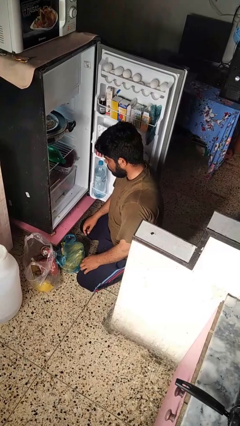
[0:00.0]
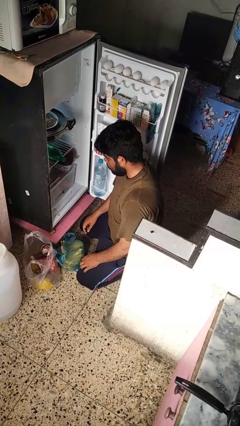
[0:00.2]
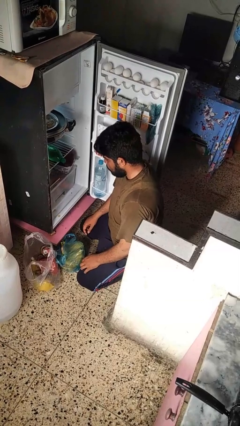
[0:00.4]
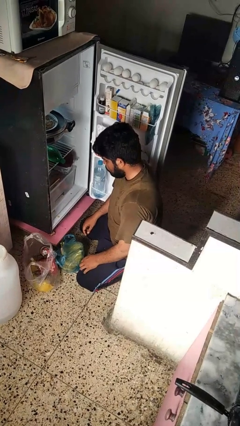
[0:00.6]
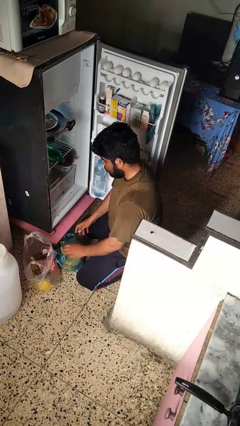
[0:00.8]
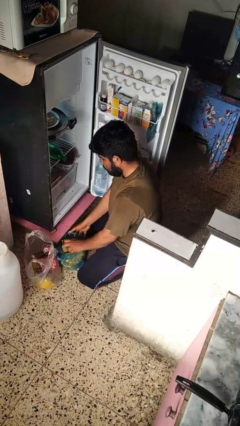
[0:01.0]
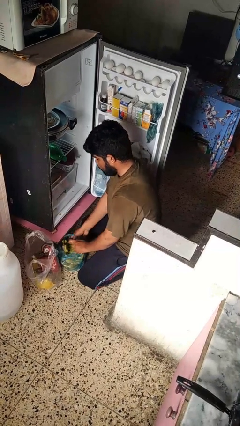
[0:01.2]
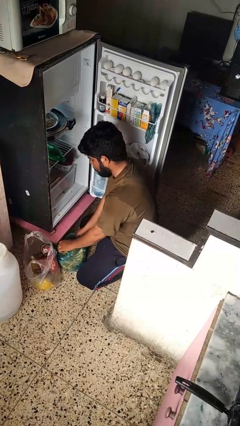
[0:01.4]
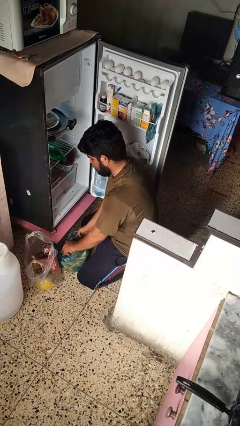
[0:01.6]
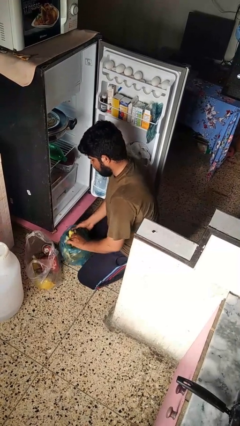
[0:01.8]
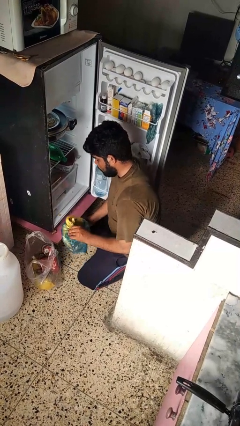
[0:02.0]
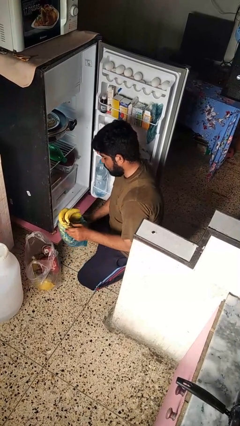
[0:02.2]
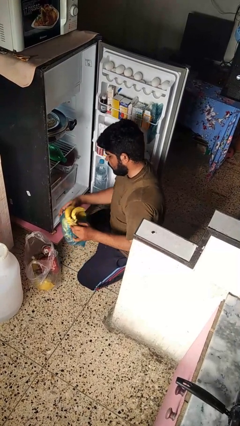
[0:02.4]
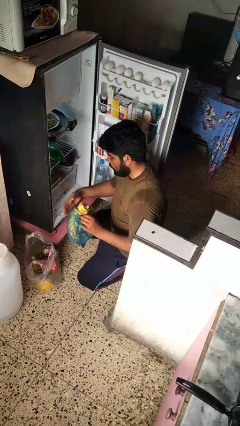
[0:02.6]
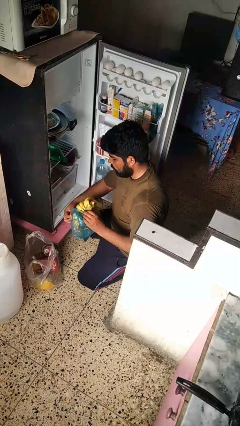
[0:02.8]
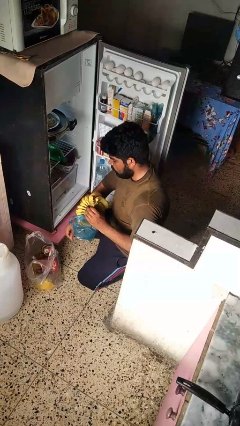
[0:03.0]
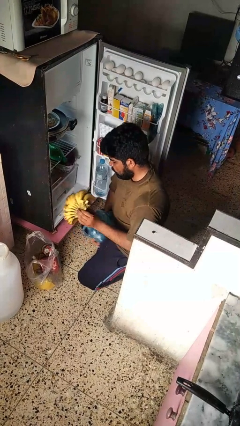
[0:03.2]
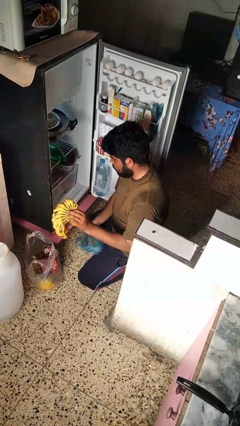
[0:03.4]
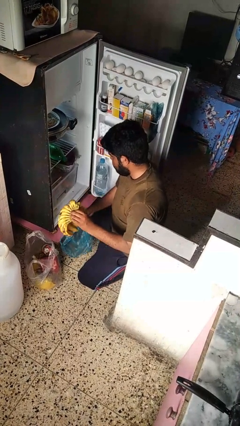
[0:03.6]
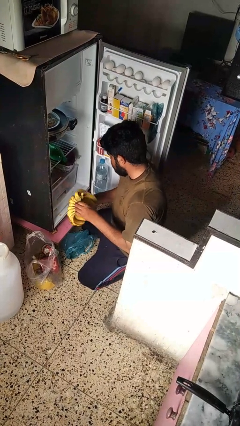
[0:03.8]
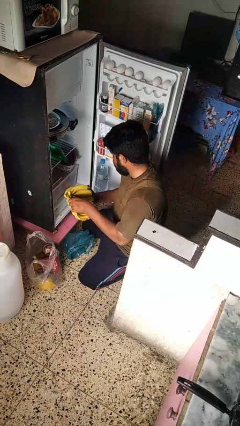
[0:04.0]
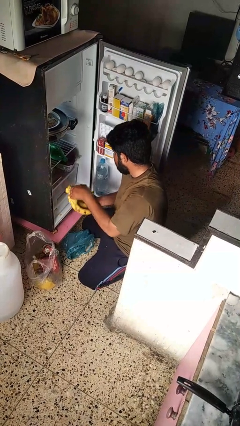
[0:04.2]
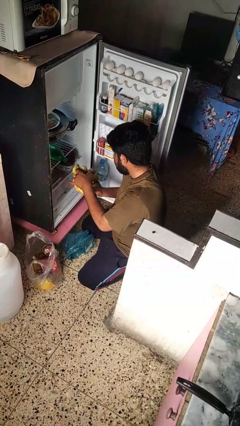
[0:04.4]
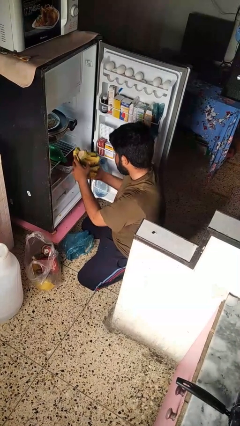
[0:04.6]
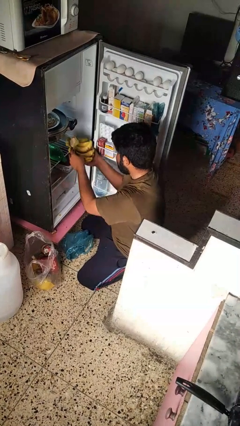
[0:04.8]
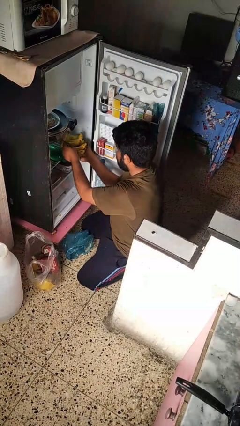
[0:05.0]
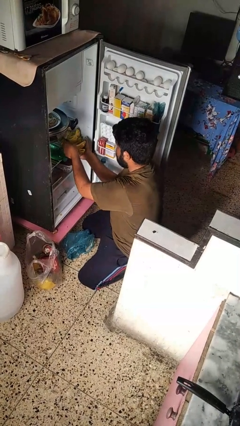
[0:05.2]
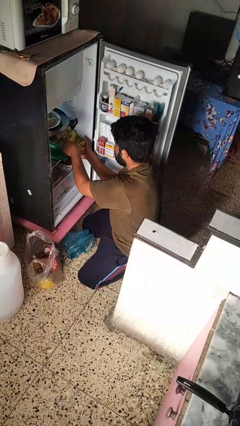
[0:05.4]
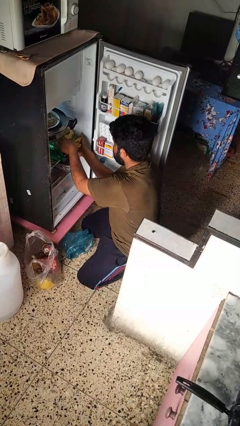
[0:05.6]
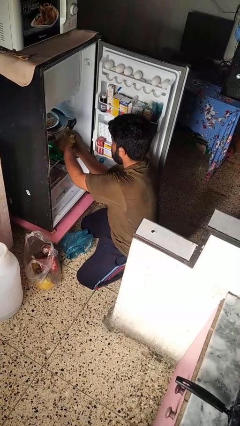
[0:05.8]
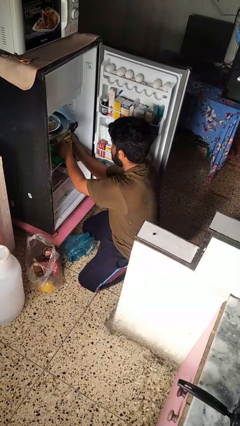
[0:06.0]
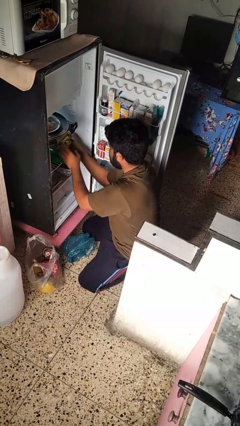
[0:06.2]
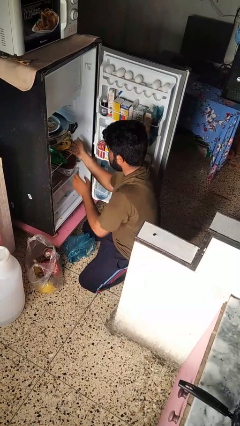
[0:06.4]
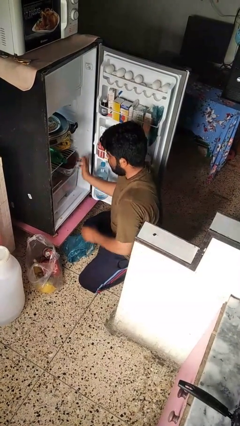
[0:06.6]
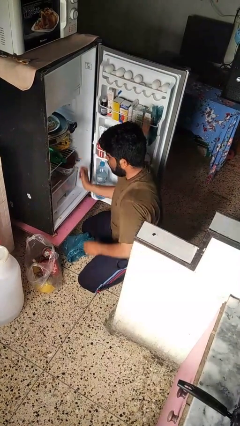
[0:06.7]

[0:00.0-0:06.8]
person loads groceries into refrigerator

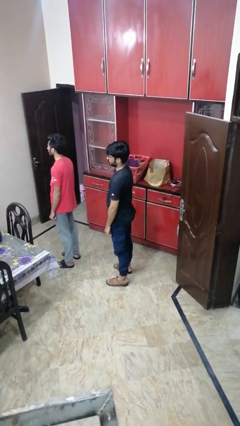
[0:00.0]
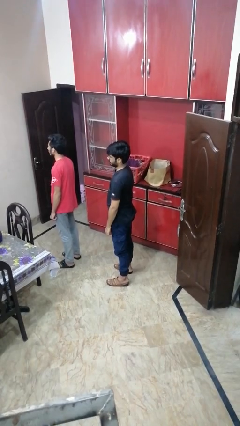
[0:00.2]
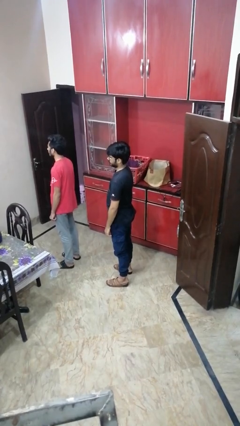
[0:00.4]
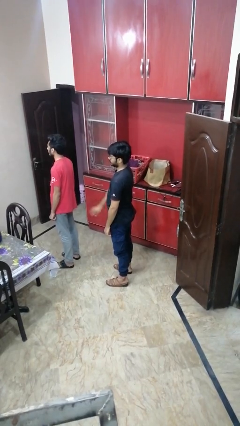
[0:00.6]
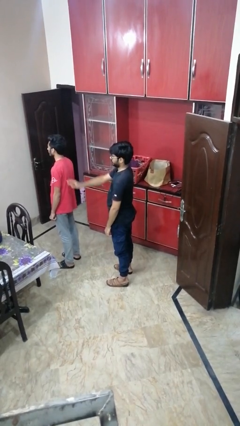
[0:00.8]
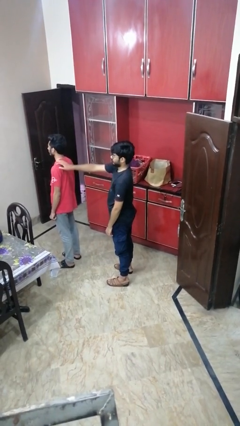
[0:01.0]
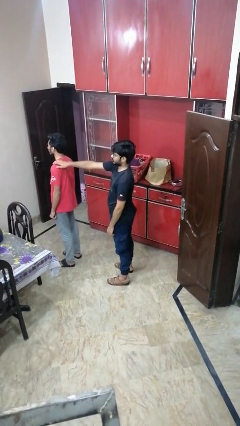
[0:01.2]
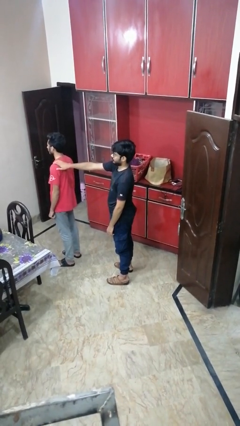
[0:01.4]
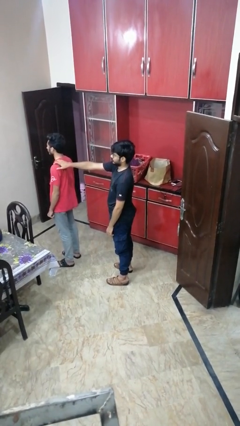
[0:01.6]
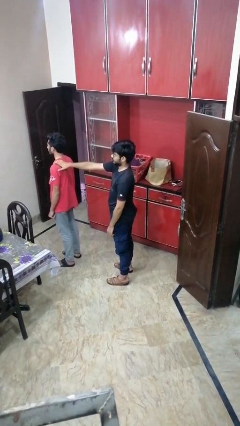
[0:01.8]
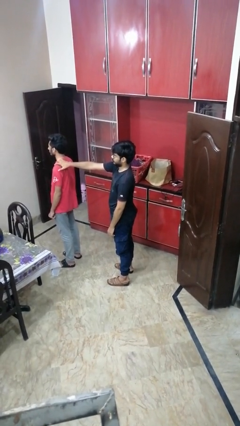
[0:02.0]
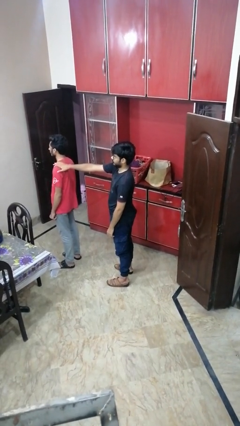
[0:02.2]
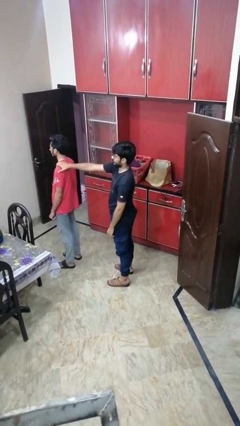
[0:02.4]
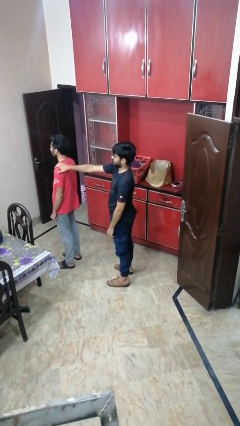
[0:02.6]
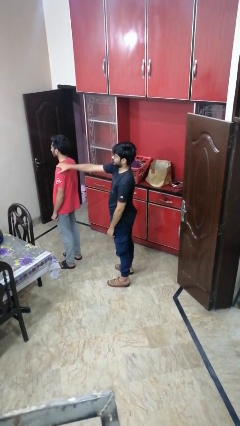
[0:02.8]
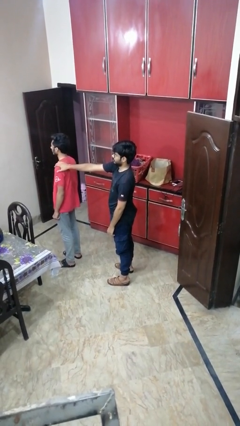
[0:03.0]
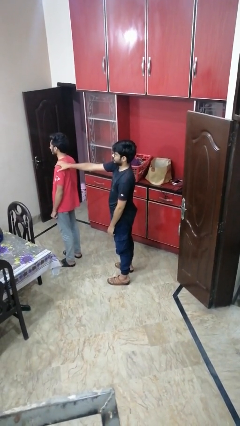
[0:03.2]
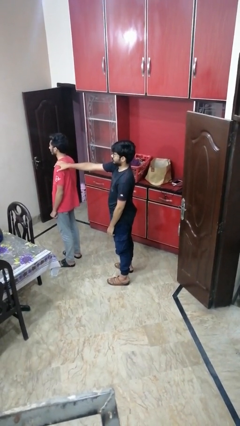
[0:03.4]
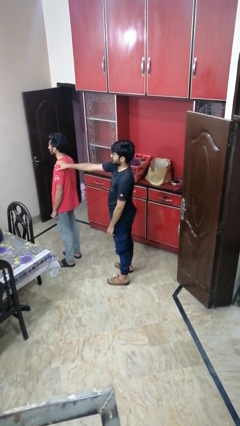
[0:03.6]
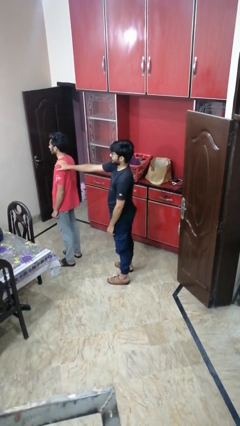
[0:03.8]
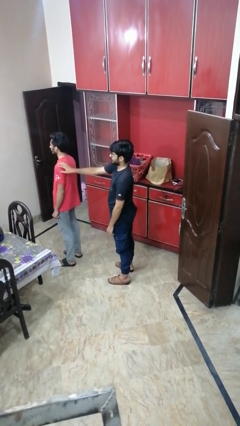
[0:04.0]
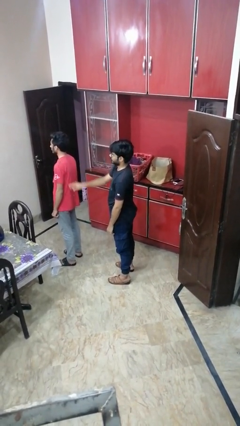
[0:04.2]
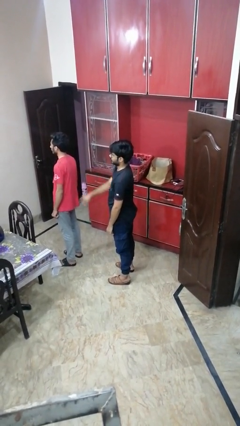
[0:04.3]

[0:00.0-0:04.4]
person touches back of person

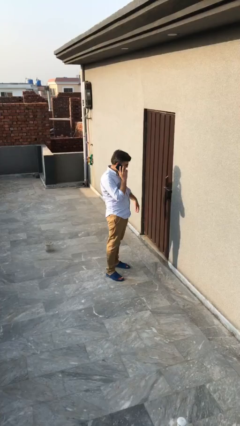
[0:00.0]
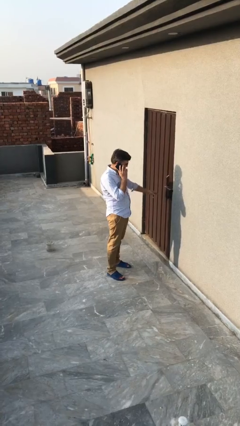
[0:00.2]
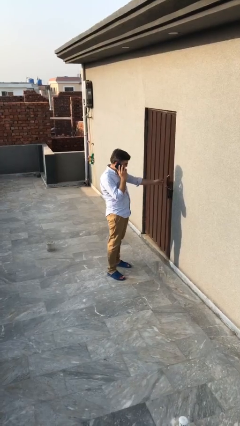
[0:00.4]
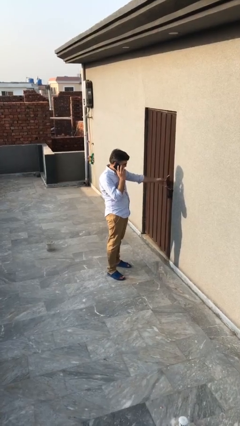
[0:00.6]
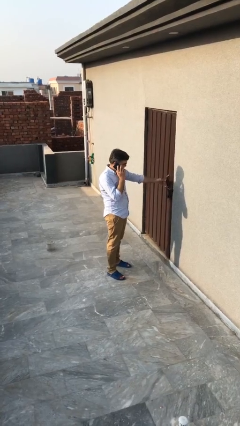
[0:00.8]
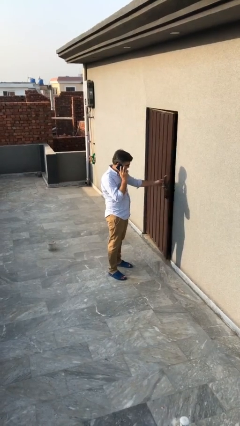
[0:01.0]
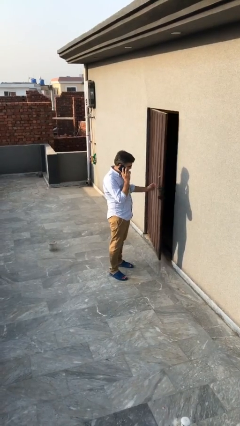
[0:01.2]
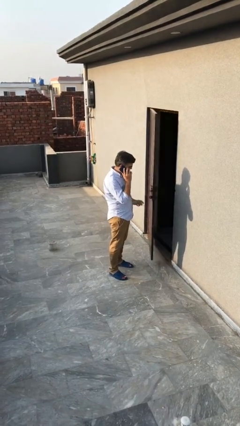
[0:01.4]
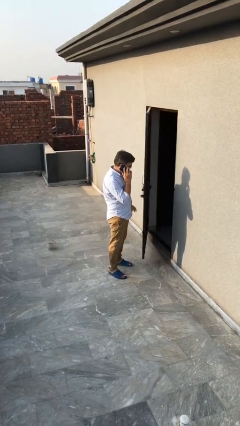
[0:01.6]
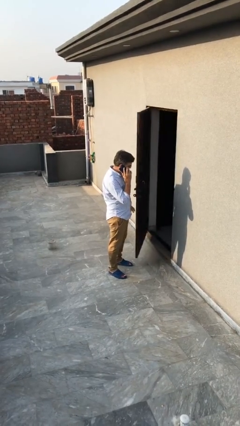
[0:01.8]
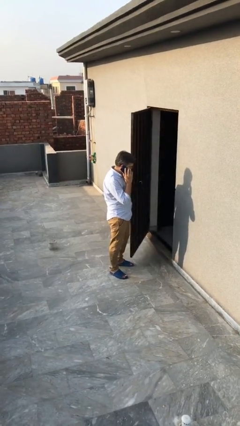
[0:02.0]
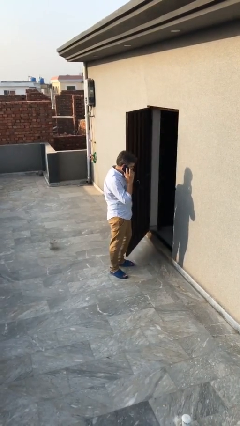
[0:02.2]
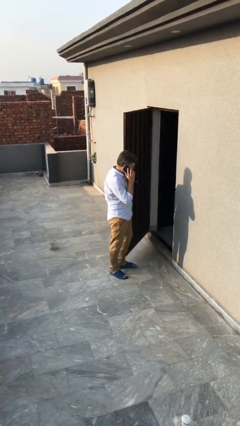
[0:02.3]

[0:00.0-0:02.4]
person opens facility door

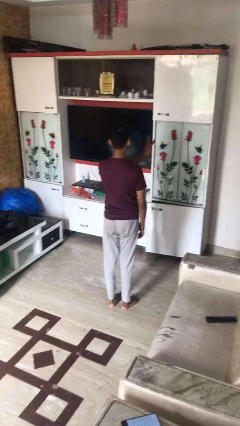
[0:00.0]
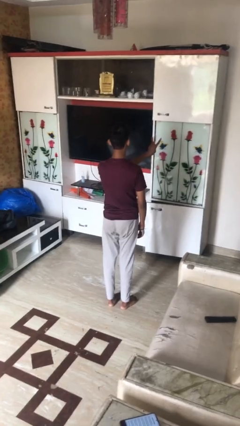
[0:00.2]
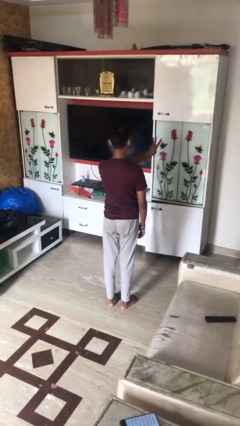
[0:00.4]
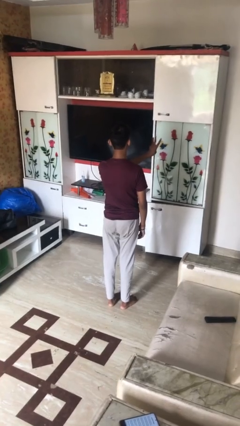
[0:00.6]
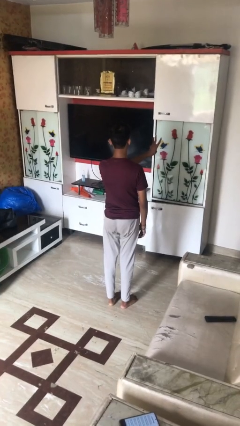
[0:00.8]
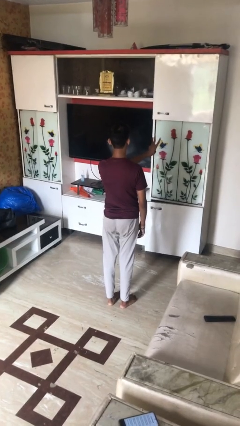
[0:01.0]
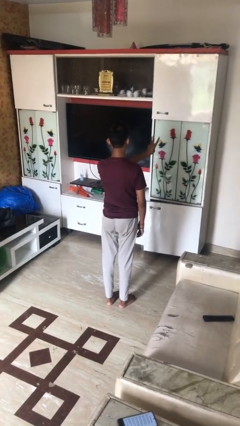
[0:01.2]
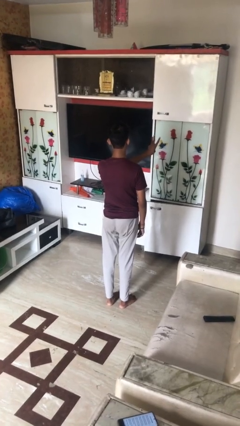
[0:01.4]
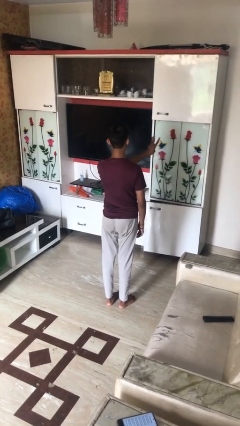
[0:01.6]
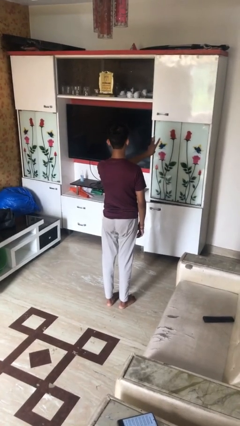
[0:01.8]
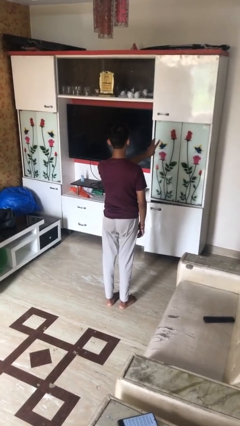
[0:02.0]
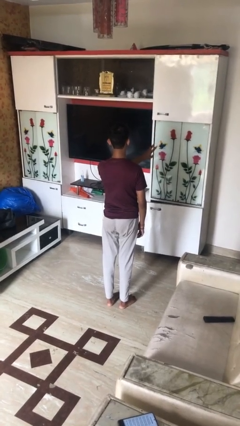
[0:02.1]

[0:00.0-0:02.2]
person gestures number three

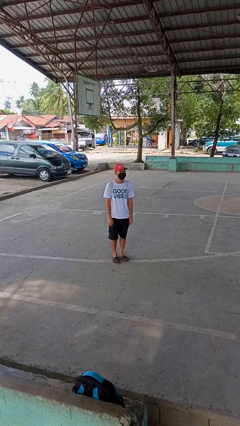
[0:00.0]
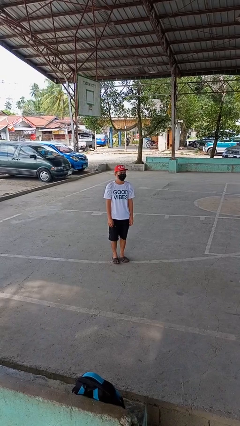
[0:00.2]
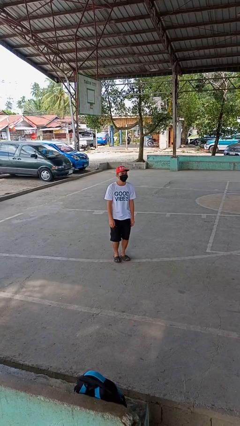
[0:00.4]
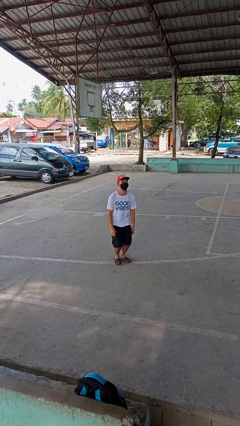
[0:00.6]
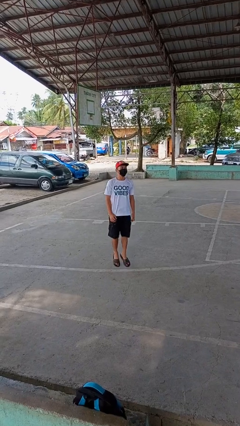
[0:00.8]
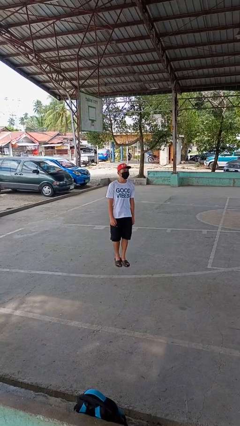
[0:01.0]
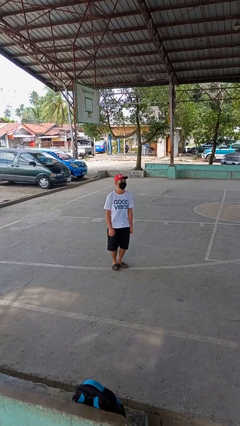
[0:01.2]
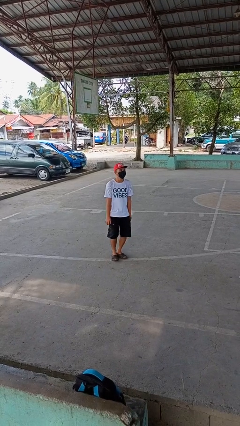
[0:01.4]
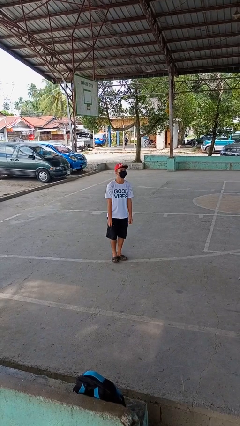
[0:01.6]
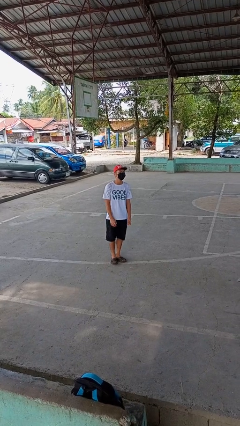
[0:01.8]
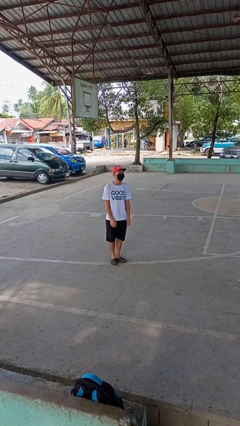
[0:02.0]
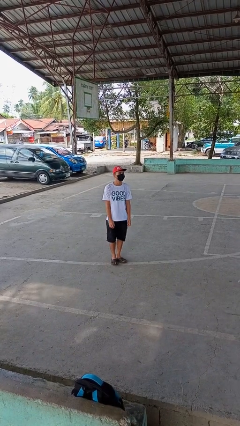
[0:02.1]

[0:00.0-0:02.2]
person jumps
